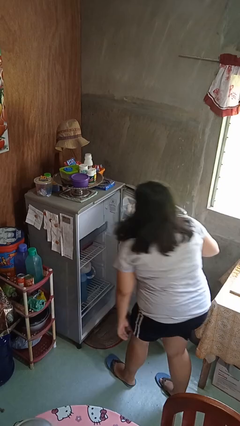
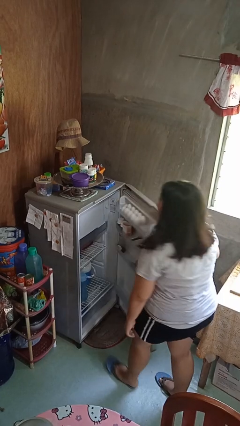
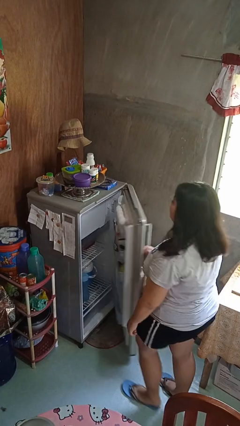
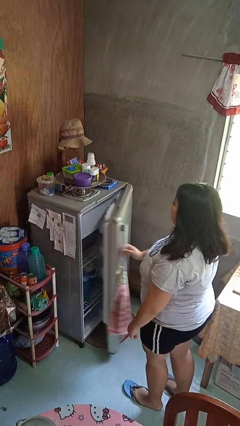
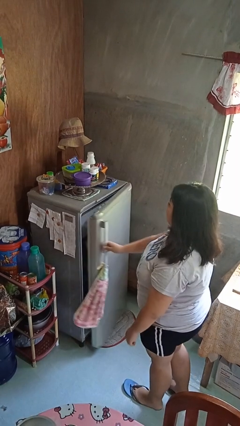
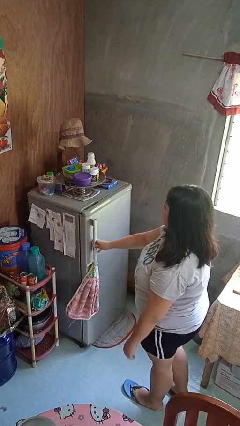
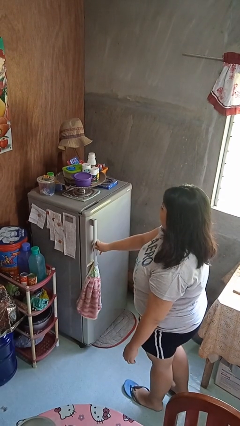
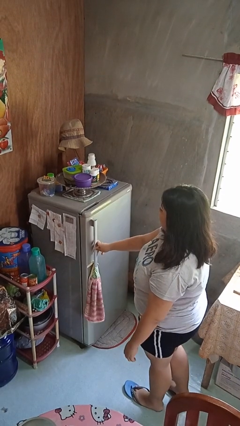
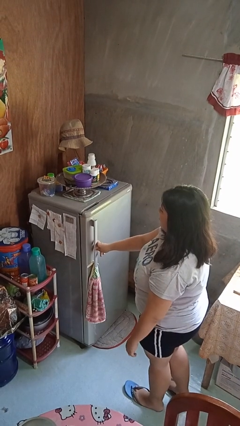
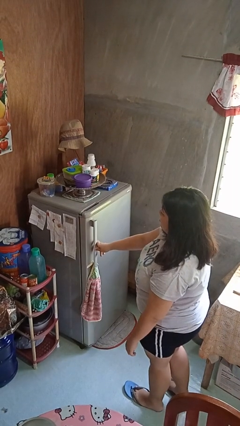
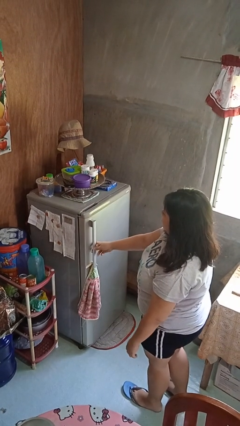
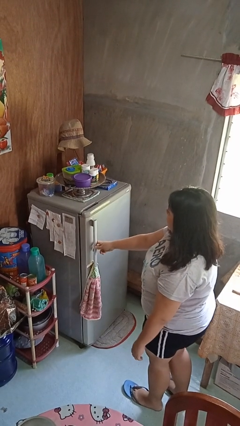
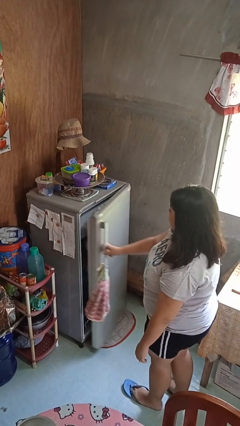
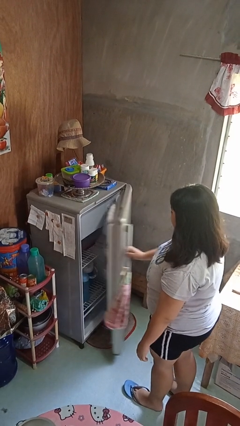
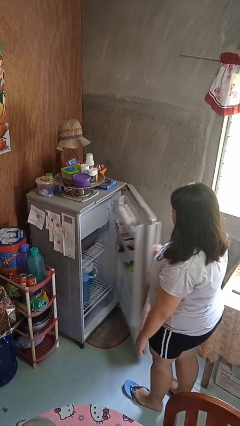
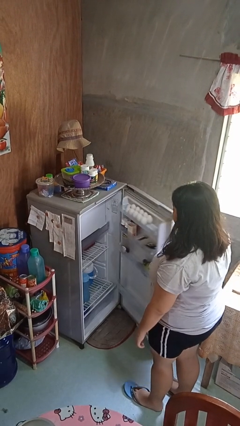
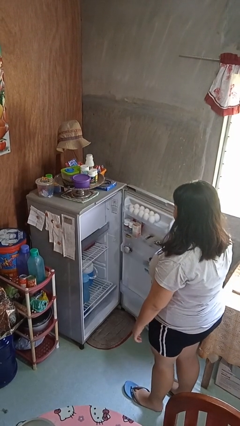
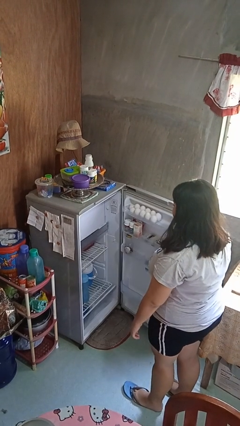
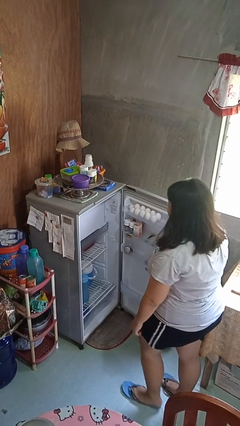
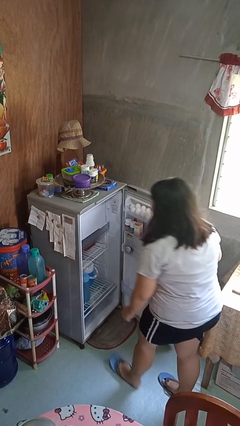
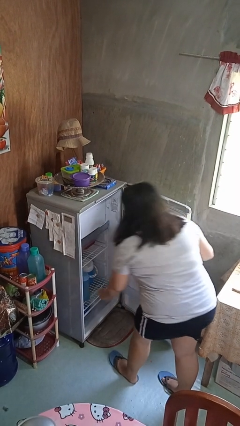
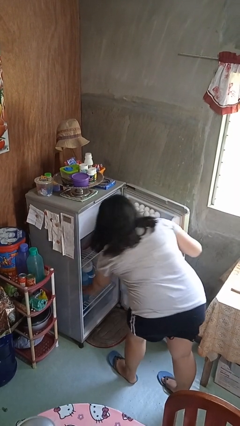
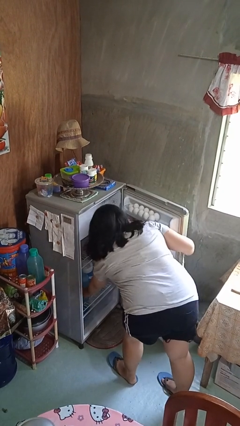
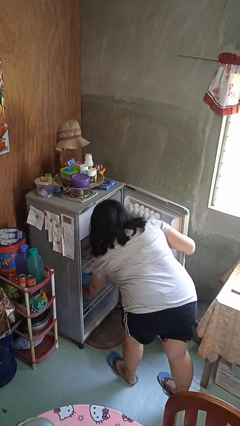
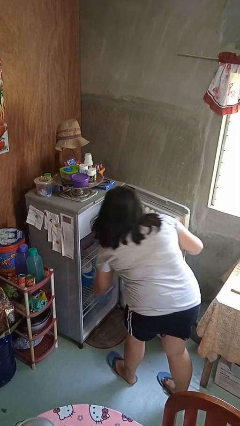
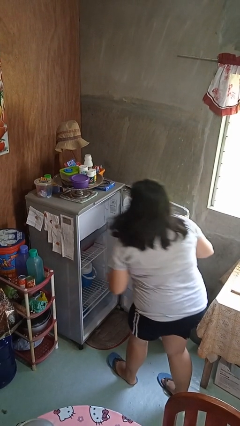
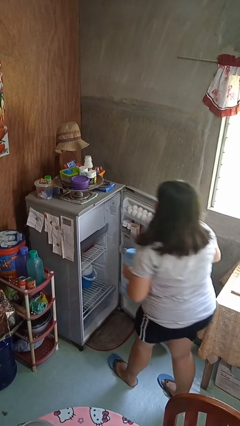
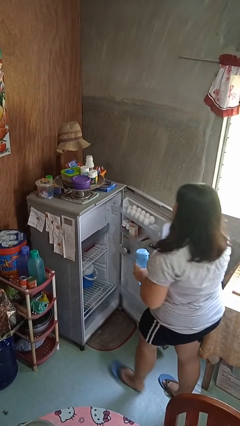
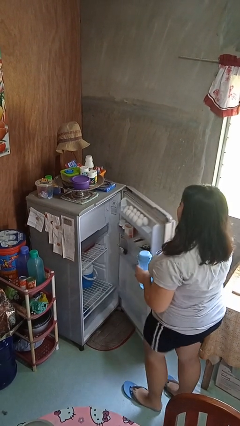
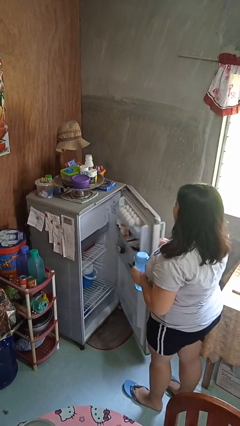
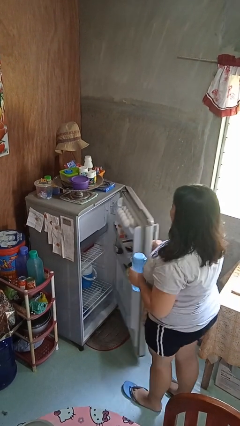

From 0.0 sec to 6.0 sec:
person closes refrigerator

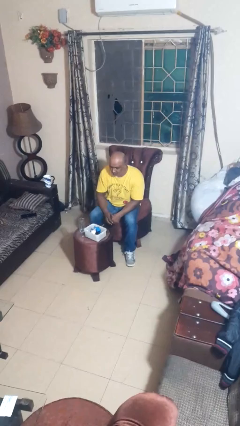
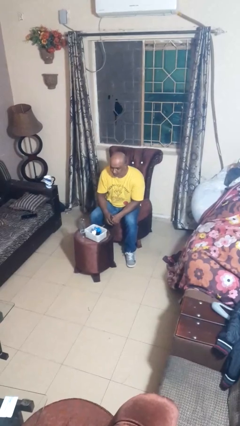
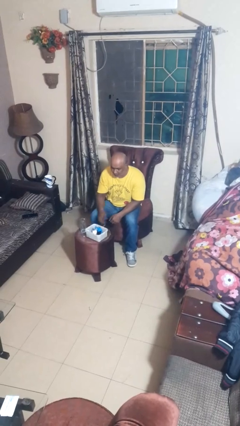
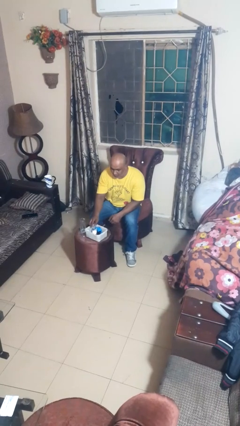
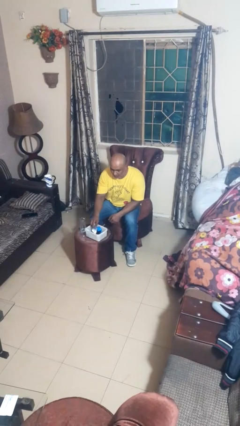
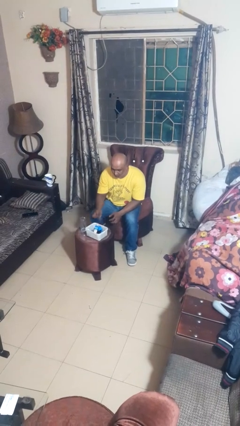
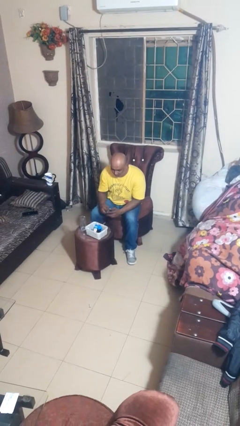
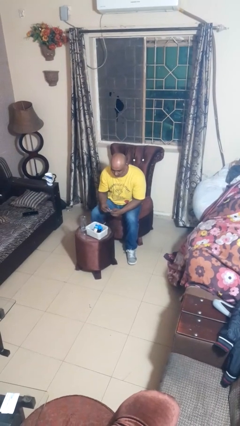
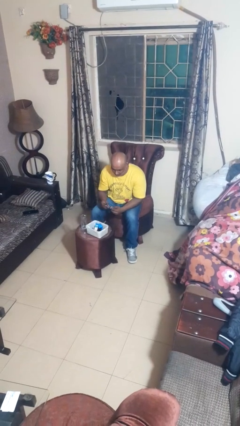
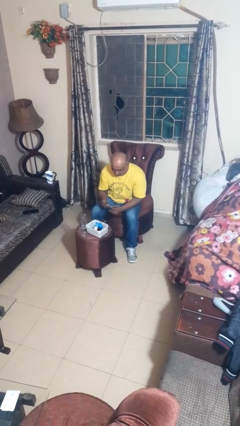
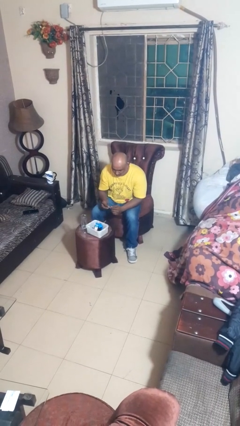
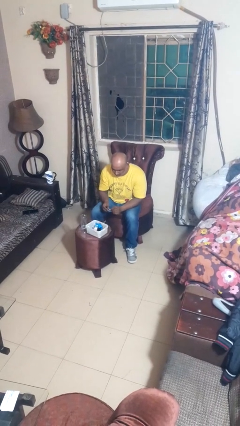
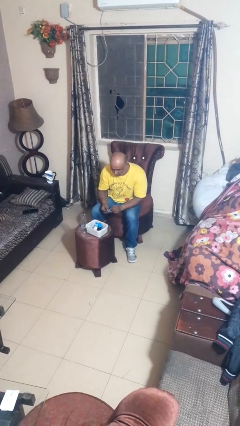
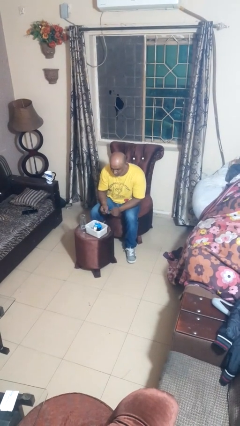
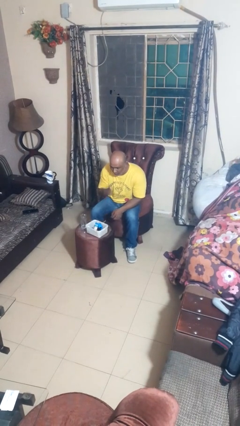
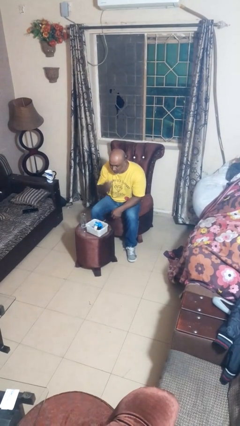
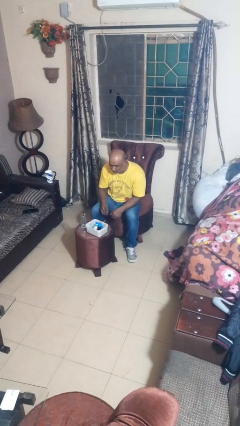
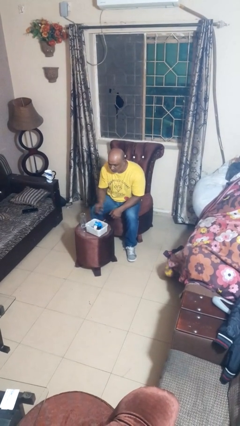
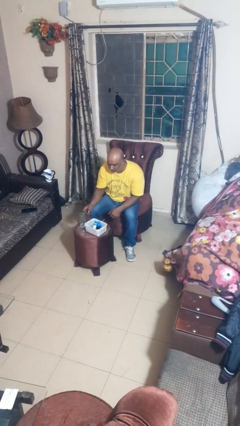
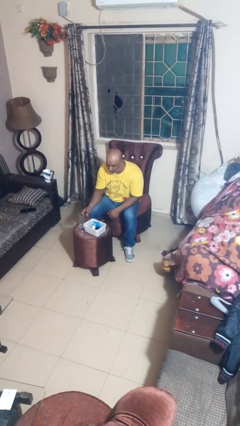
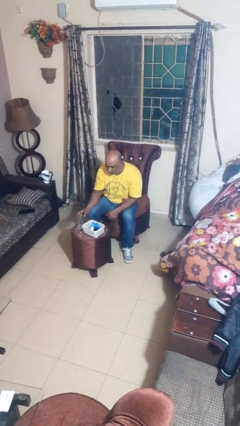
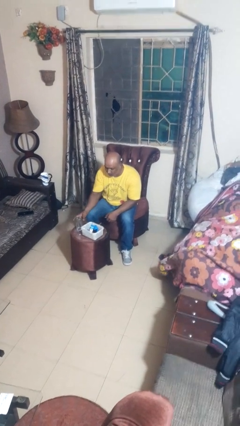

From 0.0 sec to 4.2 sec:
person takes medicine pills

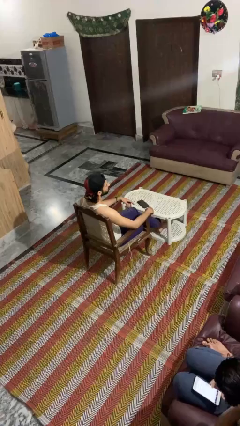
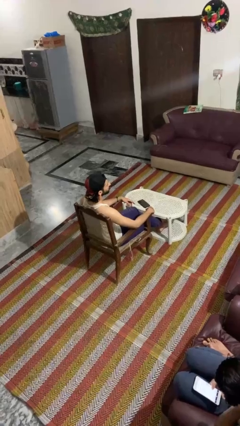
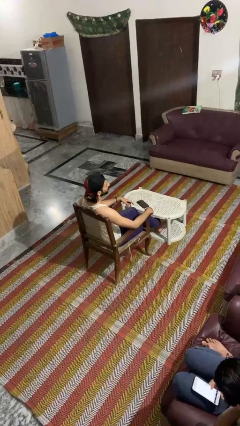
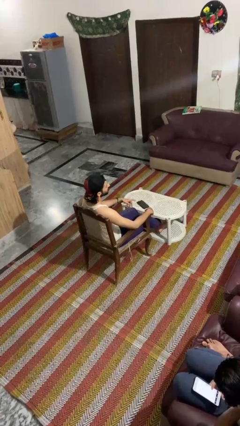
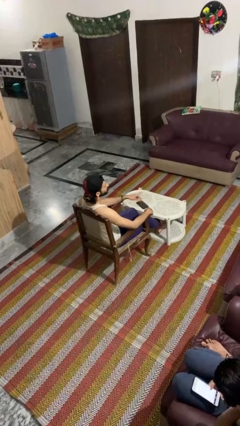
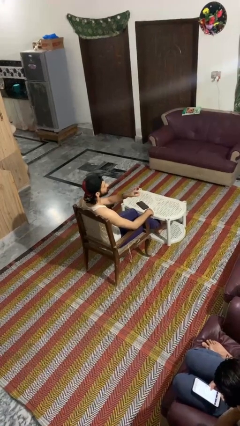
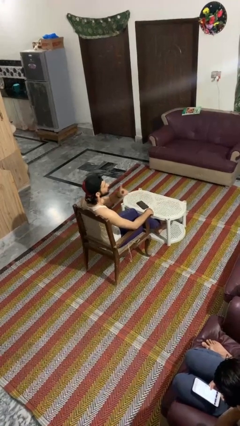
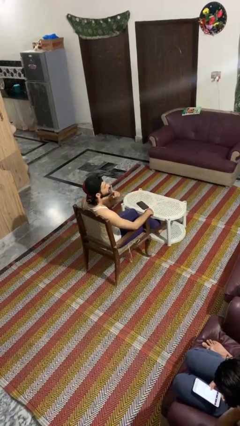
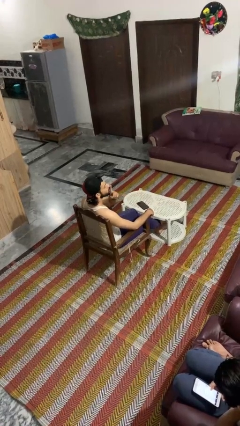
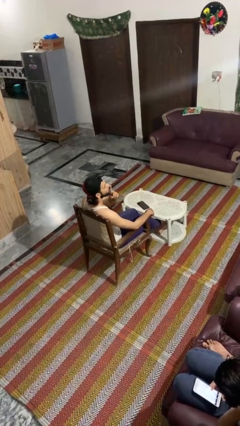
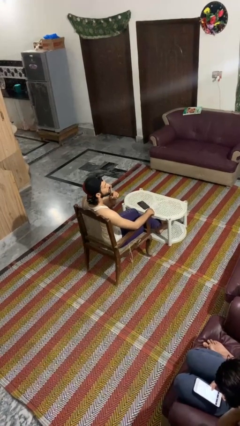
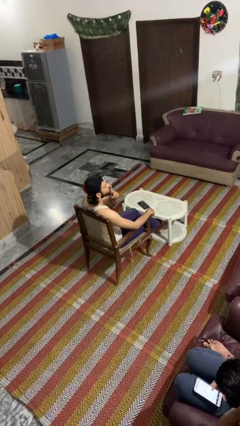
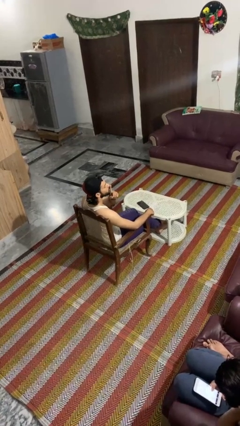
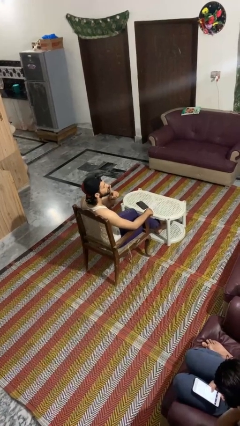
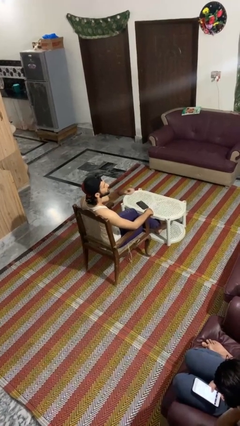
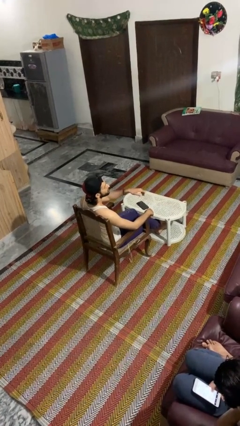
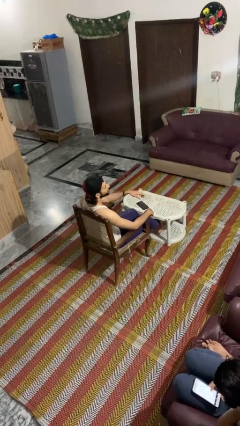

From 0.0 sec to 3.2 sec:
person gestures be quiet

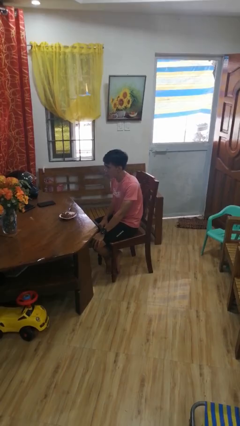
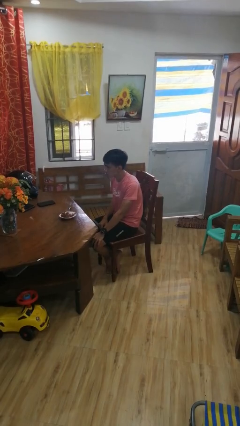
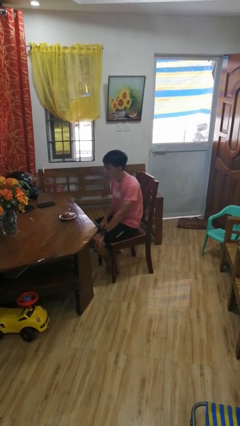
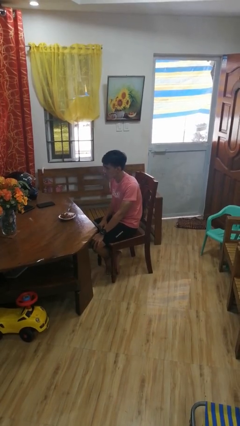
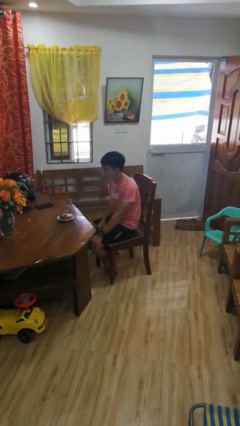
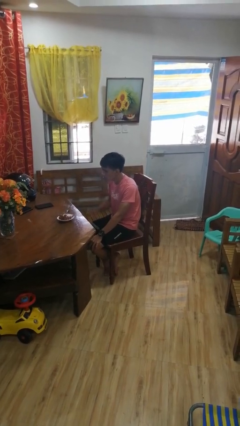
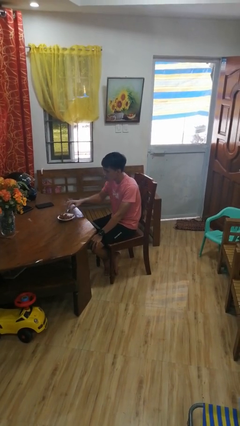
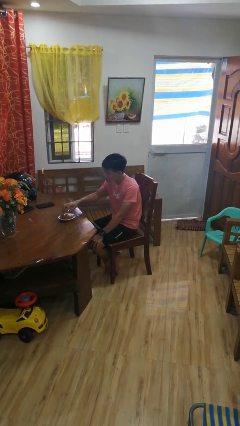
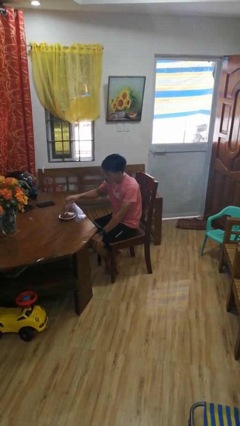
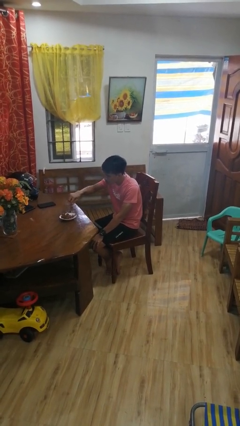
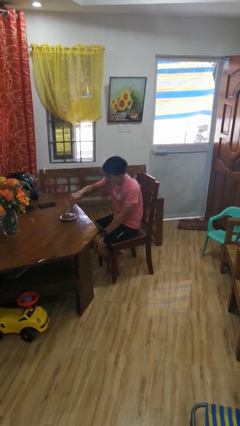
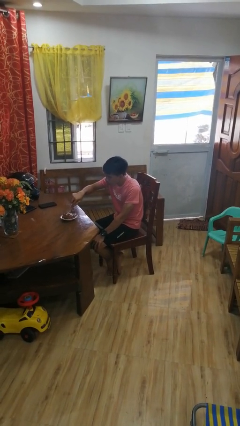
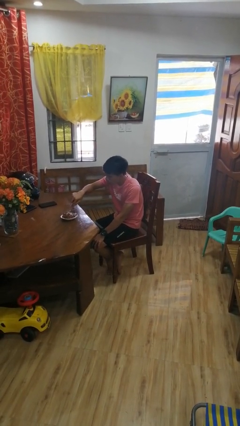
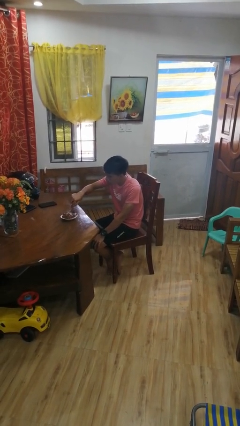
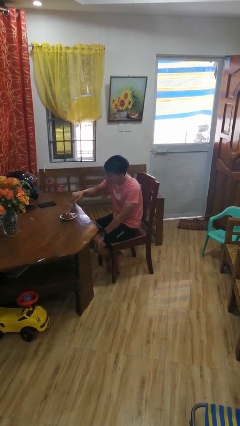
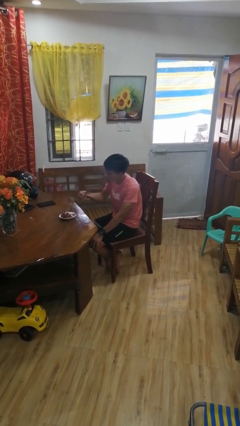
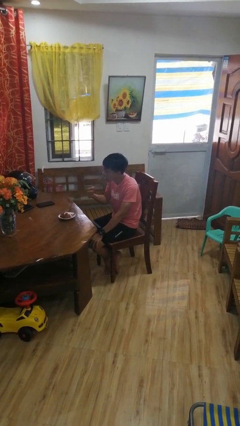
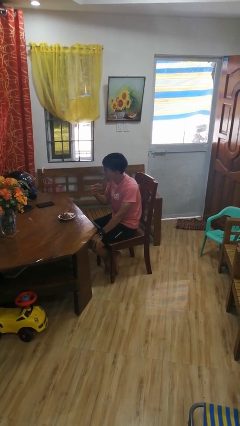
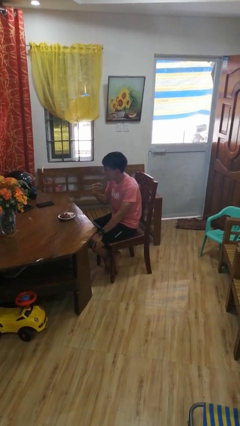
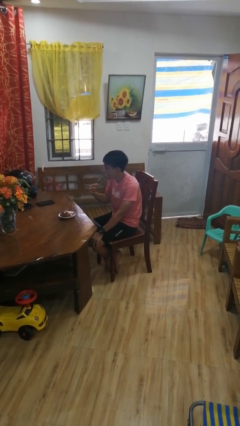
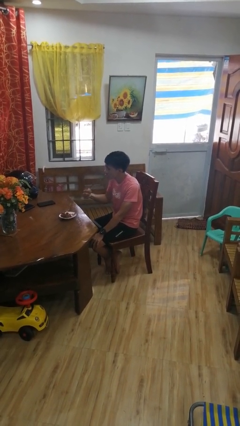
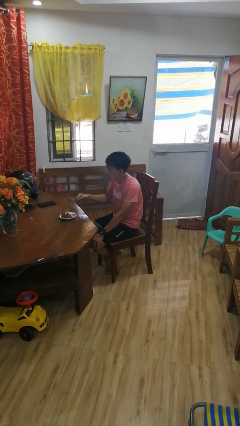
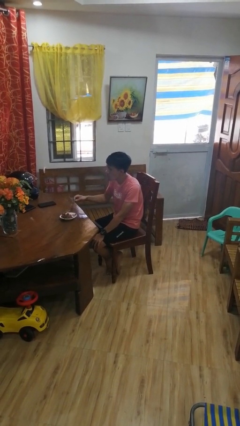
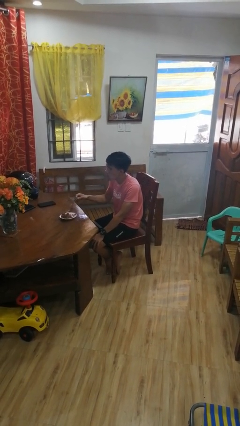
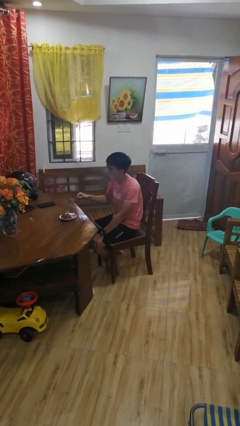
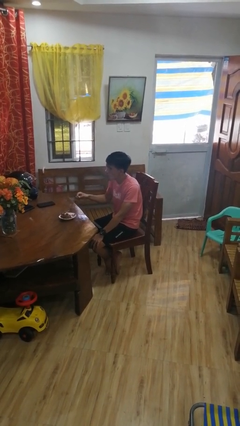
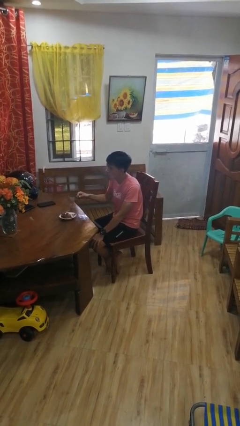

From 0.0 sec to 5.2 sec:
person eats with utensil
